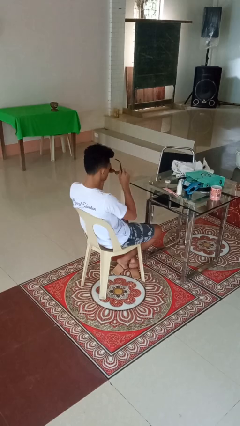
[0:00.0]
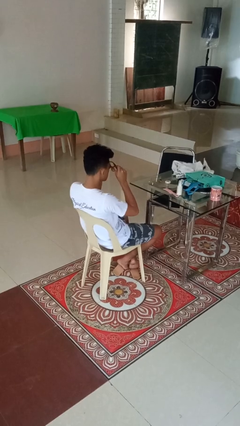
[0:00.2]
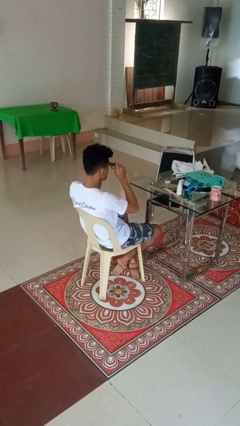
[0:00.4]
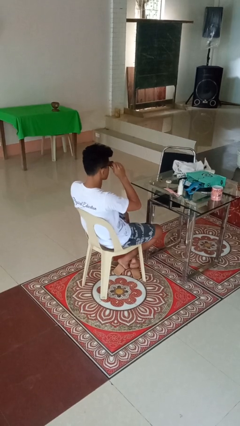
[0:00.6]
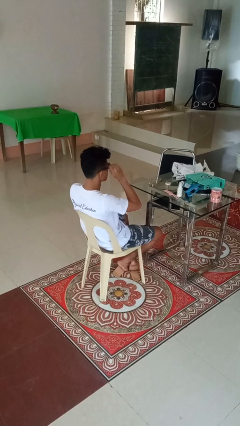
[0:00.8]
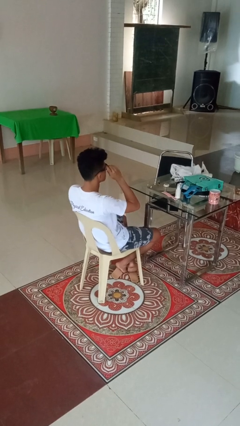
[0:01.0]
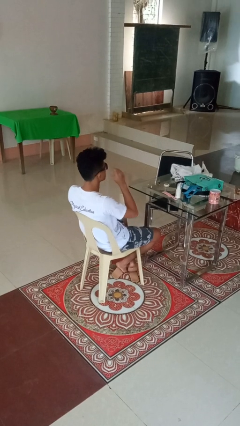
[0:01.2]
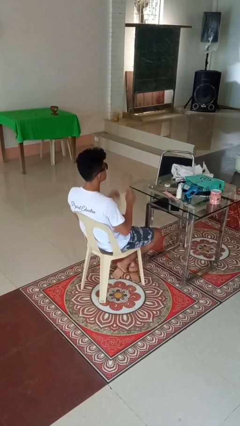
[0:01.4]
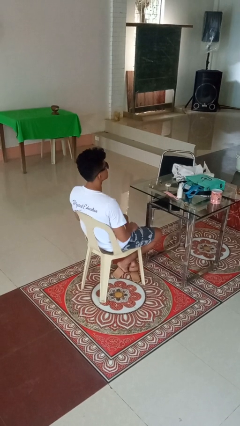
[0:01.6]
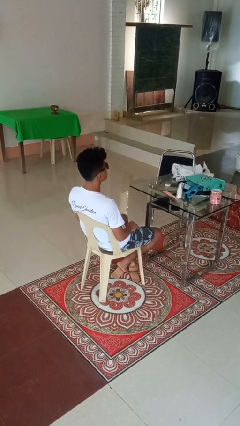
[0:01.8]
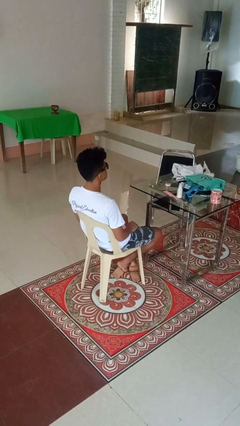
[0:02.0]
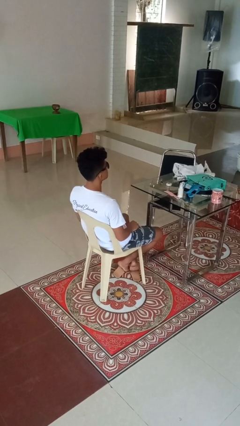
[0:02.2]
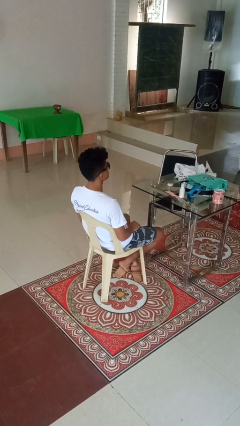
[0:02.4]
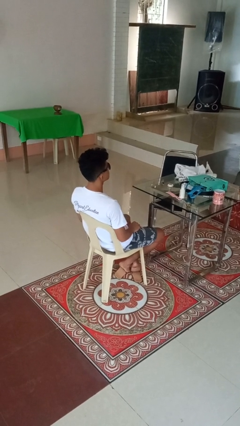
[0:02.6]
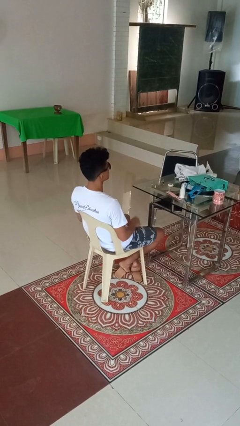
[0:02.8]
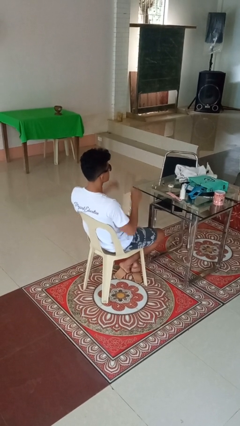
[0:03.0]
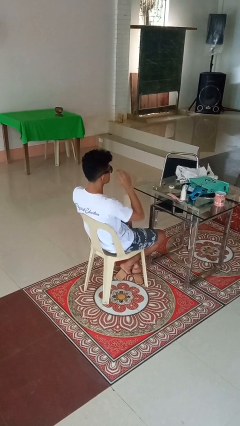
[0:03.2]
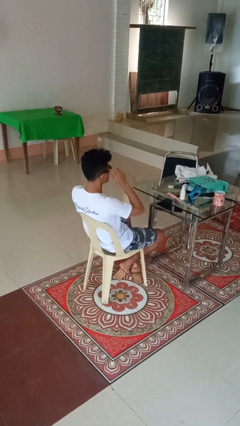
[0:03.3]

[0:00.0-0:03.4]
person puts on sunglasses

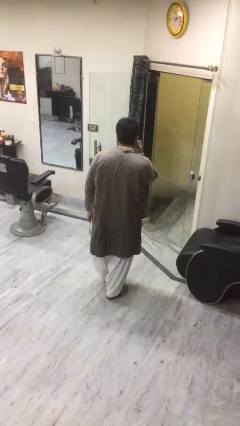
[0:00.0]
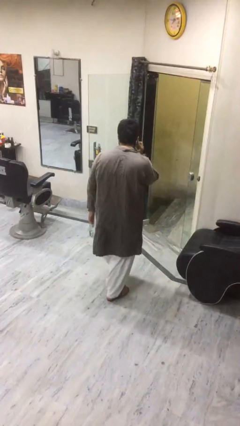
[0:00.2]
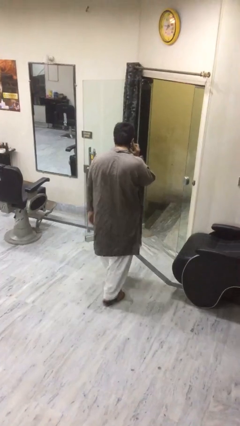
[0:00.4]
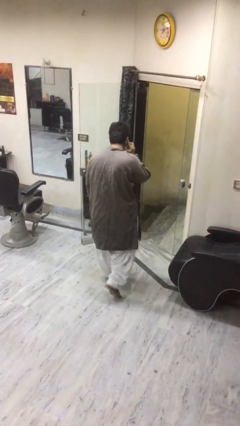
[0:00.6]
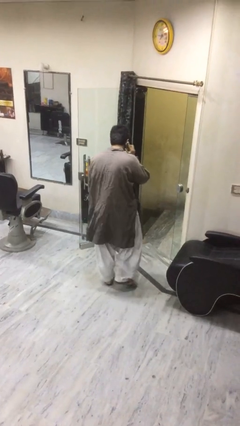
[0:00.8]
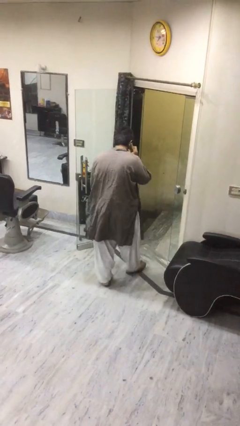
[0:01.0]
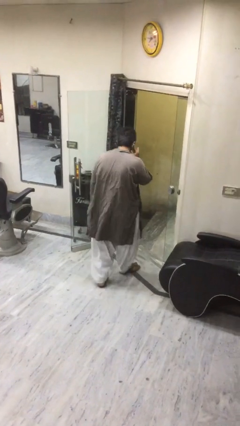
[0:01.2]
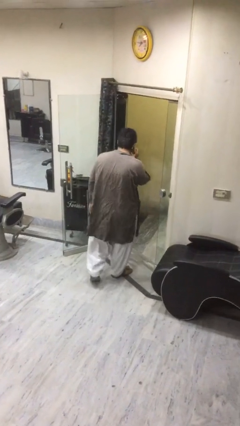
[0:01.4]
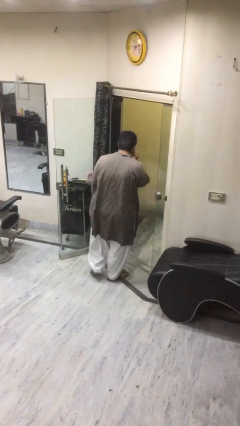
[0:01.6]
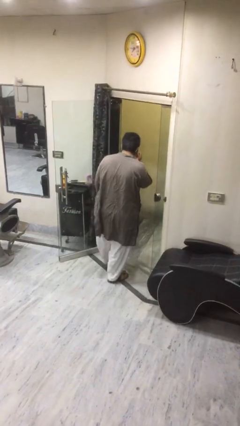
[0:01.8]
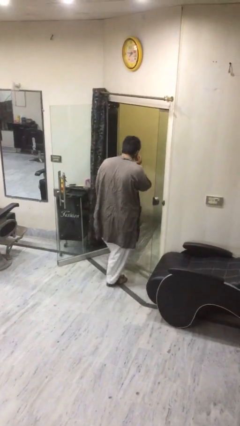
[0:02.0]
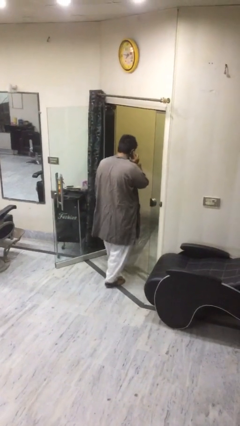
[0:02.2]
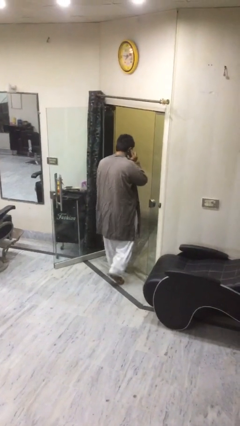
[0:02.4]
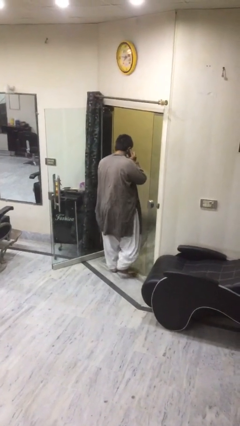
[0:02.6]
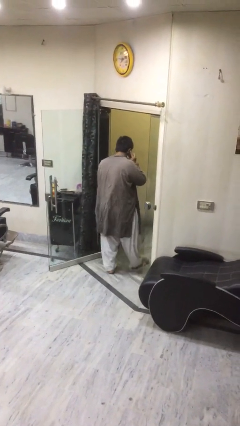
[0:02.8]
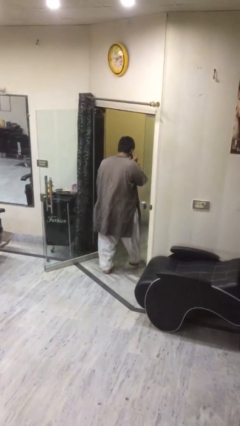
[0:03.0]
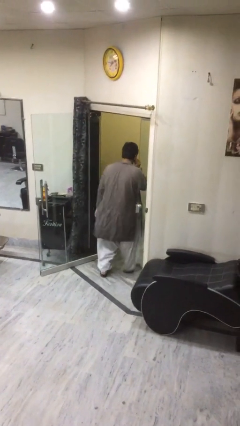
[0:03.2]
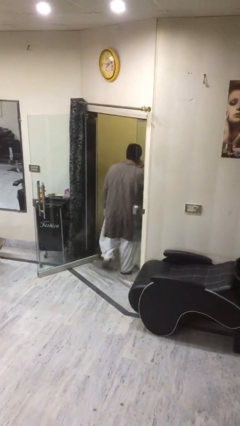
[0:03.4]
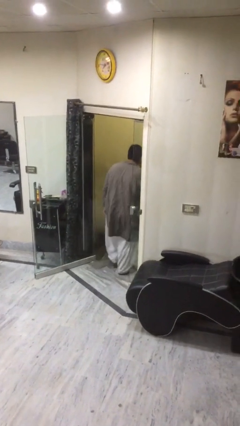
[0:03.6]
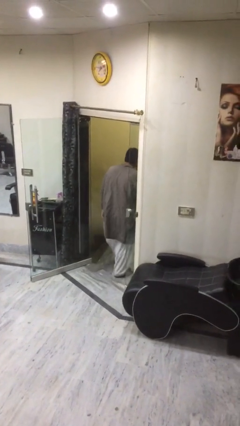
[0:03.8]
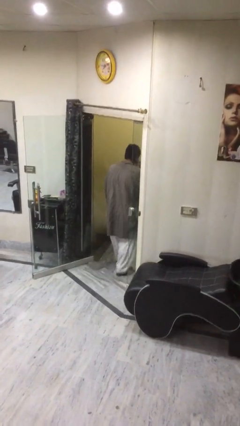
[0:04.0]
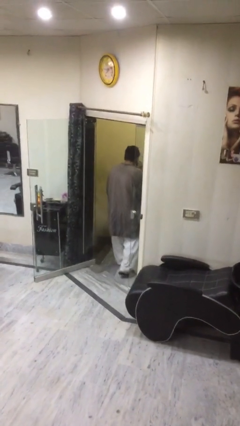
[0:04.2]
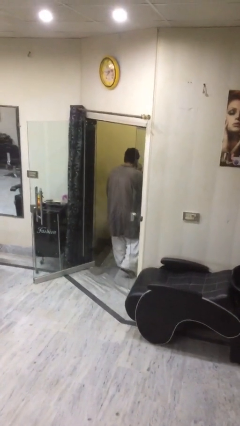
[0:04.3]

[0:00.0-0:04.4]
person exits scene through structure

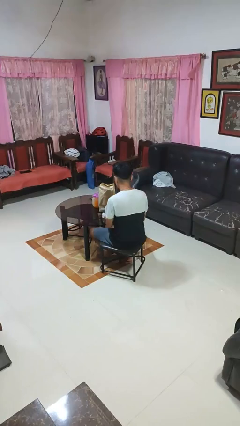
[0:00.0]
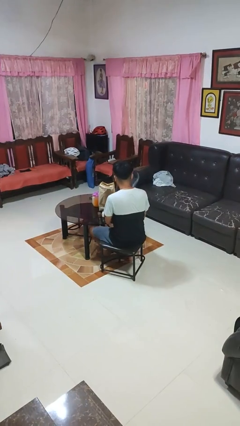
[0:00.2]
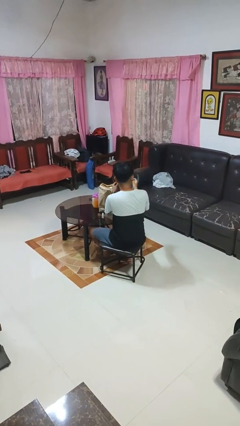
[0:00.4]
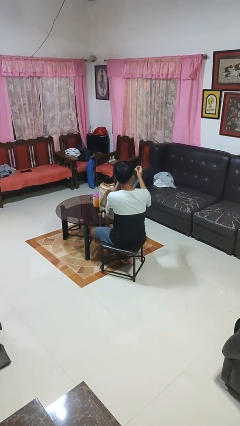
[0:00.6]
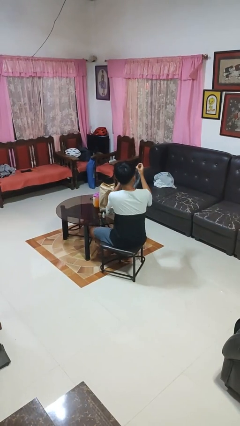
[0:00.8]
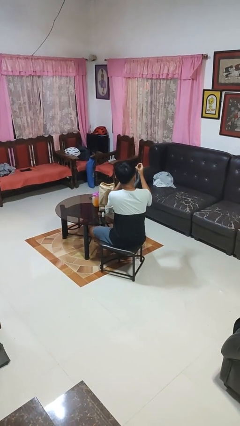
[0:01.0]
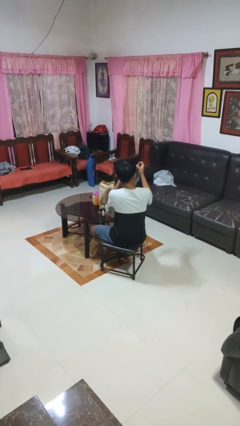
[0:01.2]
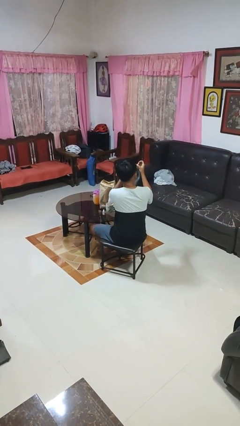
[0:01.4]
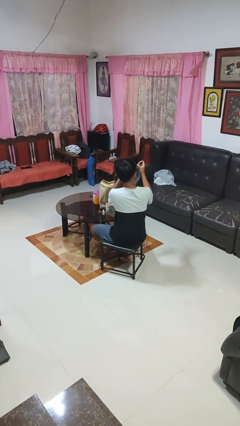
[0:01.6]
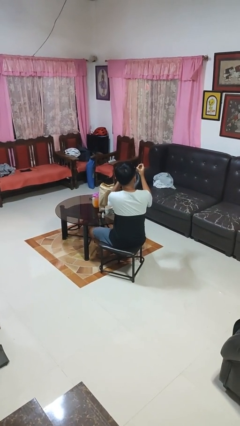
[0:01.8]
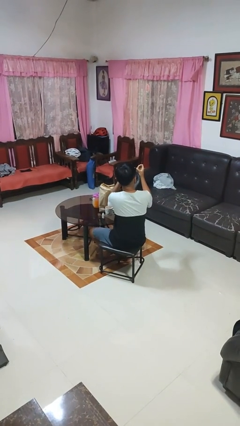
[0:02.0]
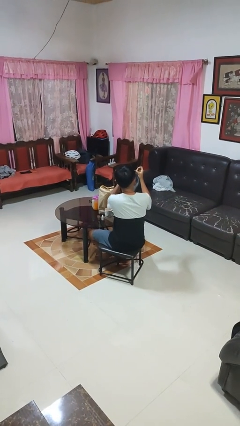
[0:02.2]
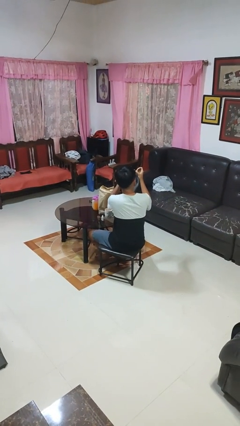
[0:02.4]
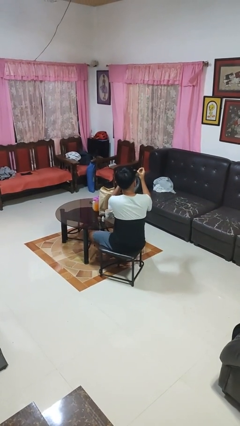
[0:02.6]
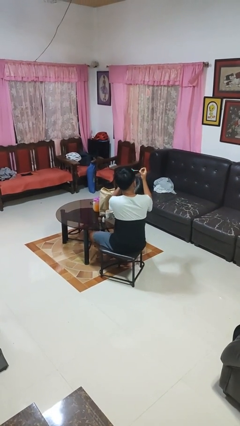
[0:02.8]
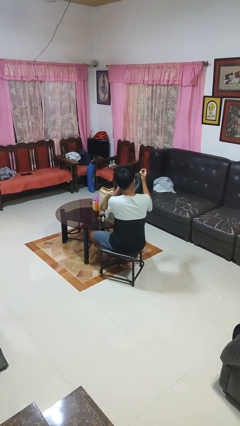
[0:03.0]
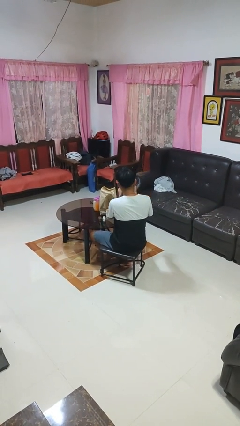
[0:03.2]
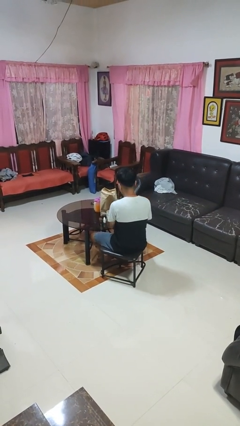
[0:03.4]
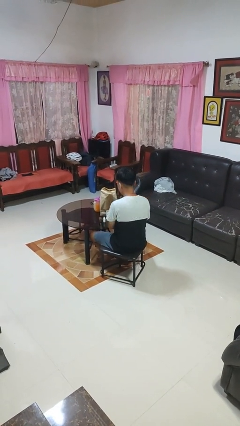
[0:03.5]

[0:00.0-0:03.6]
person paints fingernails

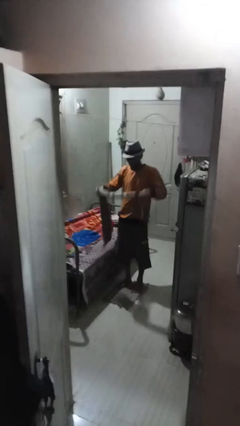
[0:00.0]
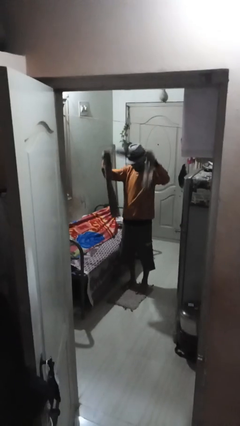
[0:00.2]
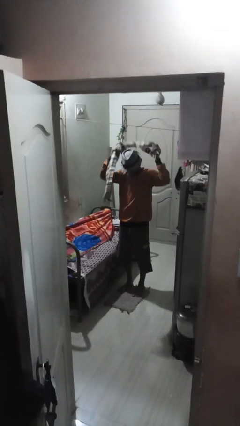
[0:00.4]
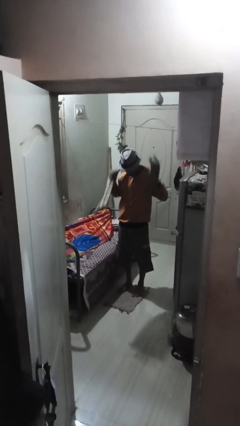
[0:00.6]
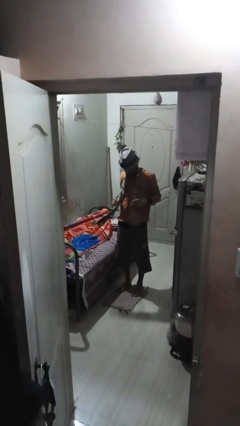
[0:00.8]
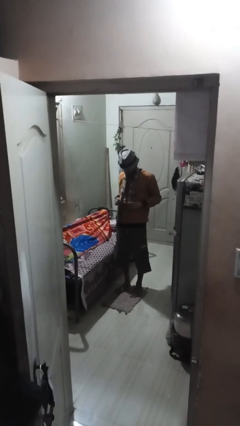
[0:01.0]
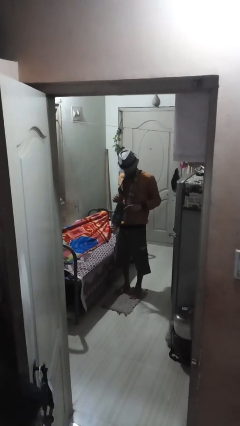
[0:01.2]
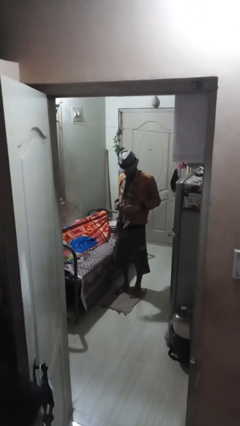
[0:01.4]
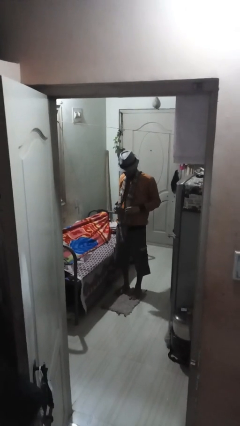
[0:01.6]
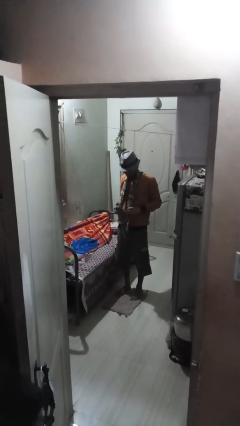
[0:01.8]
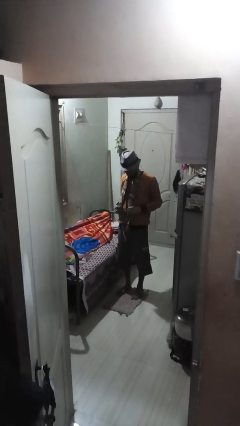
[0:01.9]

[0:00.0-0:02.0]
person puts on scarf

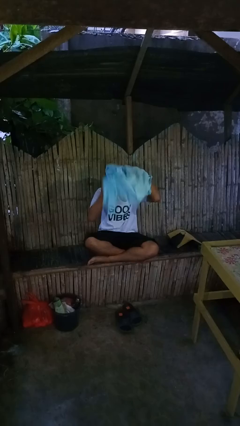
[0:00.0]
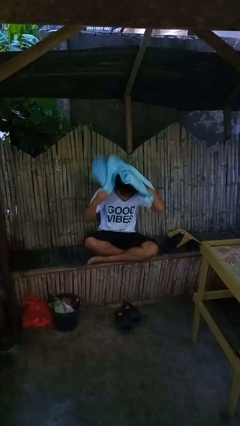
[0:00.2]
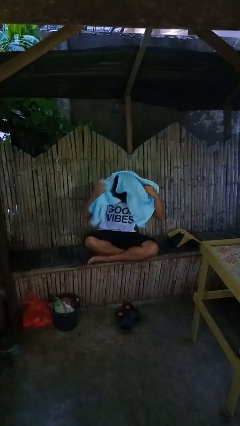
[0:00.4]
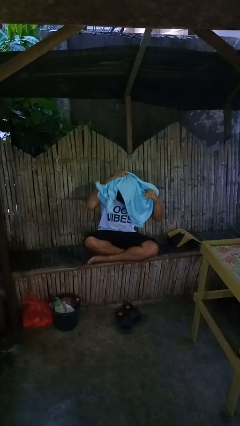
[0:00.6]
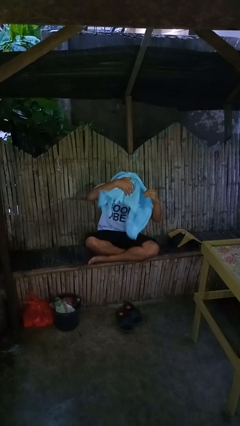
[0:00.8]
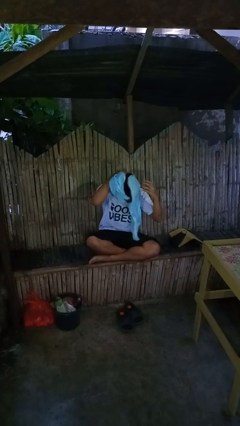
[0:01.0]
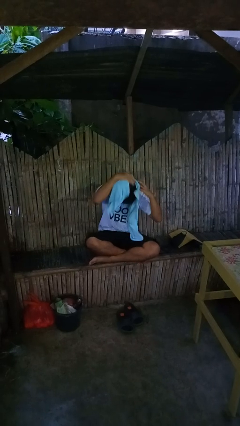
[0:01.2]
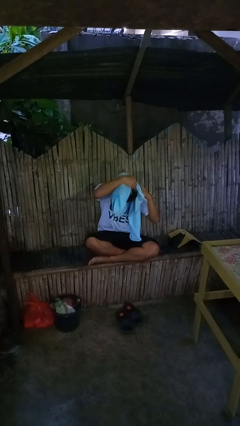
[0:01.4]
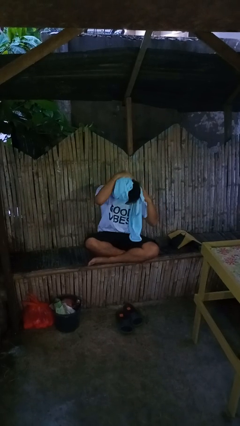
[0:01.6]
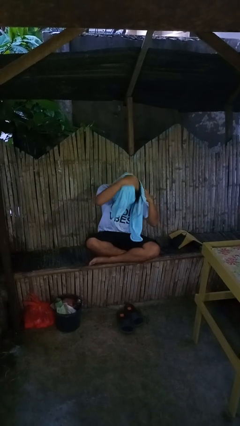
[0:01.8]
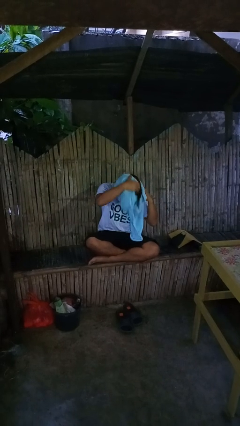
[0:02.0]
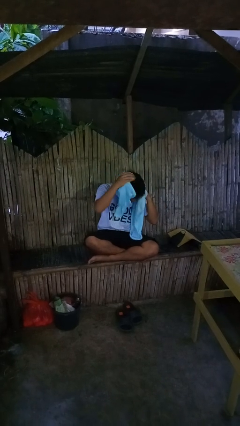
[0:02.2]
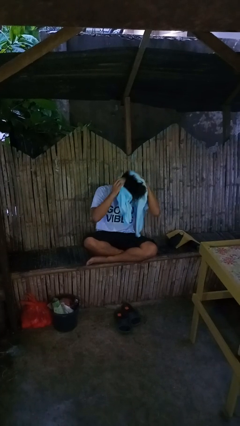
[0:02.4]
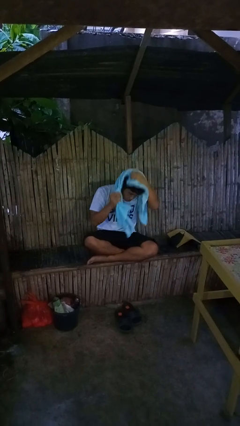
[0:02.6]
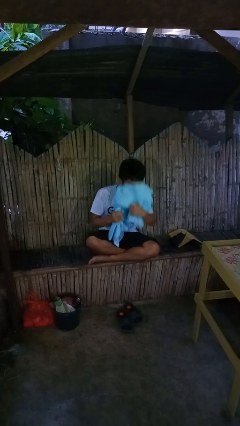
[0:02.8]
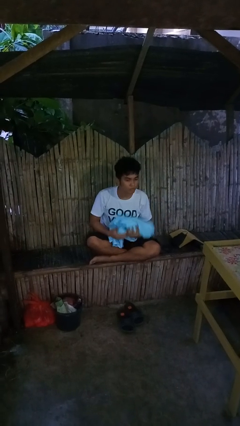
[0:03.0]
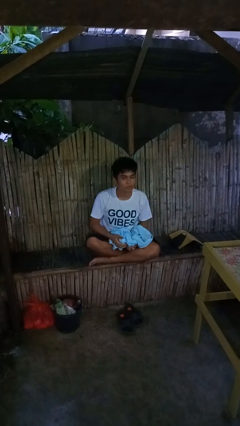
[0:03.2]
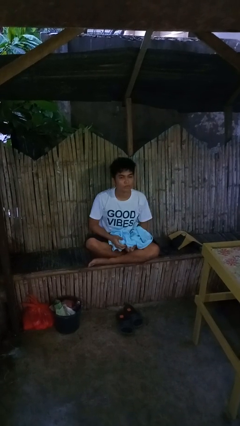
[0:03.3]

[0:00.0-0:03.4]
person dries hair with towel

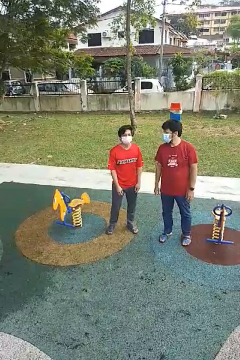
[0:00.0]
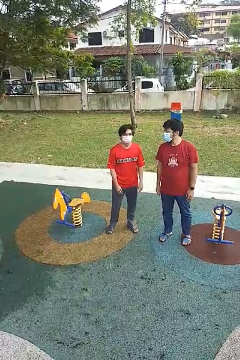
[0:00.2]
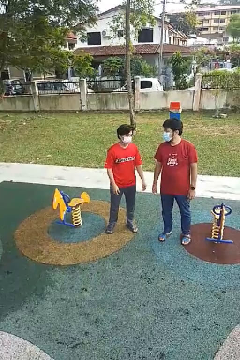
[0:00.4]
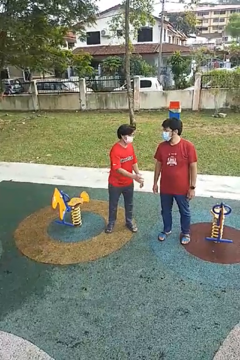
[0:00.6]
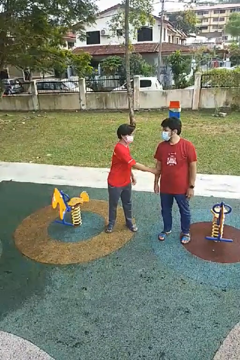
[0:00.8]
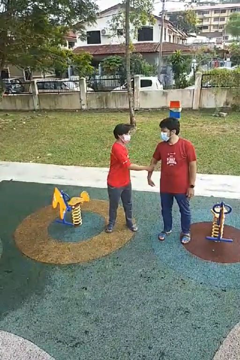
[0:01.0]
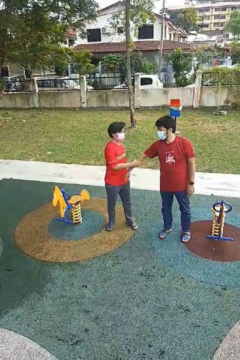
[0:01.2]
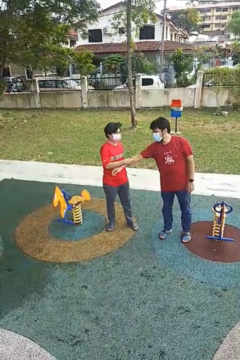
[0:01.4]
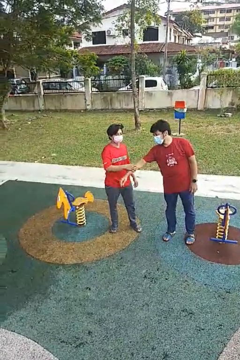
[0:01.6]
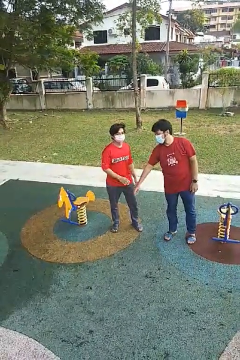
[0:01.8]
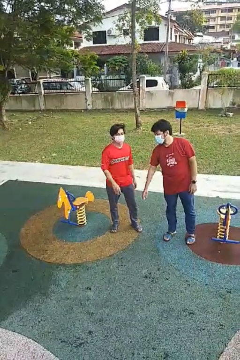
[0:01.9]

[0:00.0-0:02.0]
person grabs person by forearm
